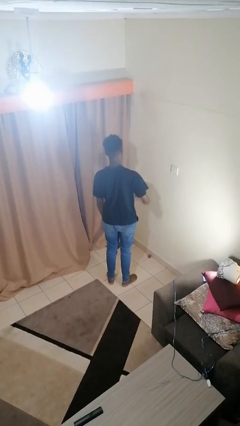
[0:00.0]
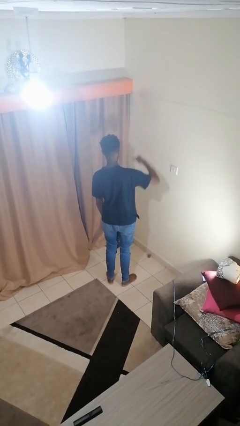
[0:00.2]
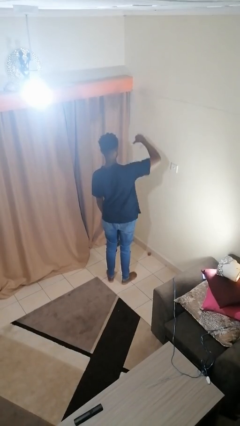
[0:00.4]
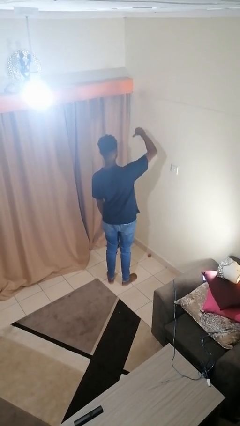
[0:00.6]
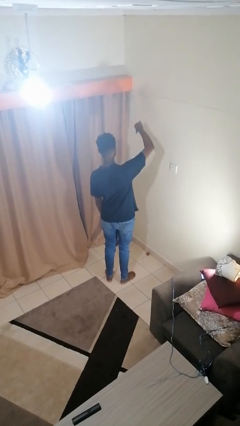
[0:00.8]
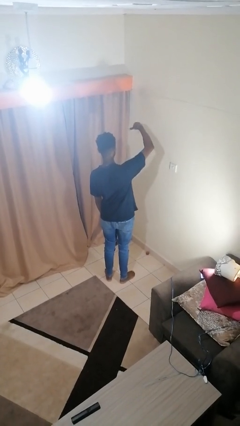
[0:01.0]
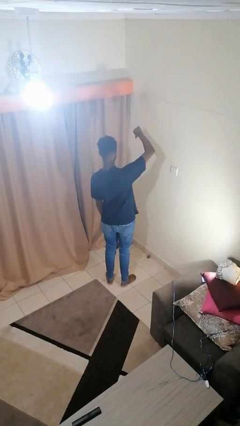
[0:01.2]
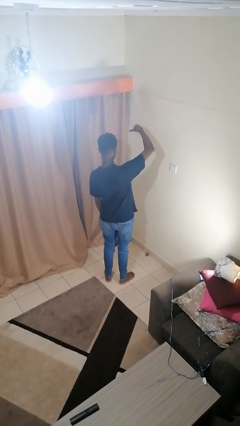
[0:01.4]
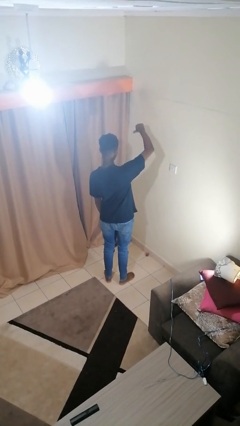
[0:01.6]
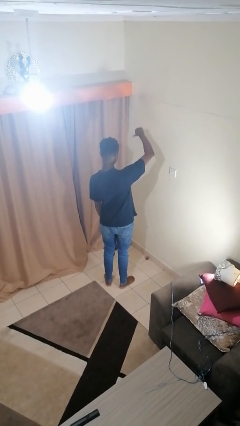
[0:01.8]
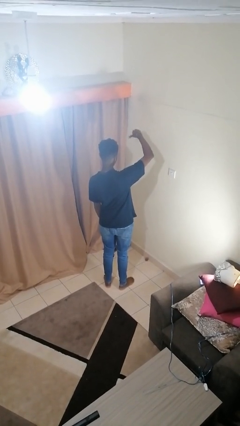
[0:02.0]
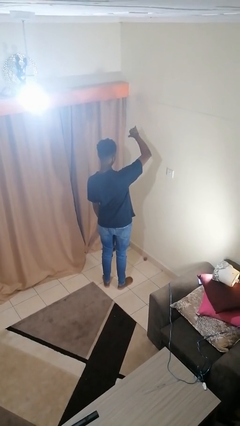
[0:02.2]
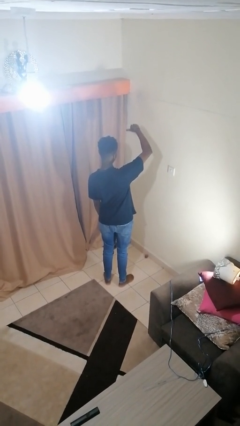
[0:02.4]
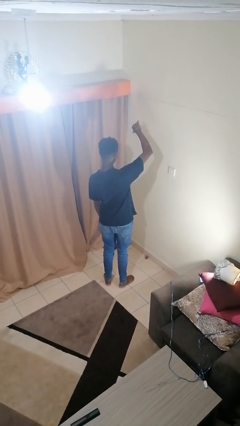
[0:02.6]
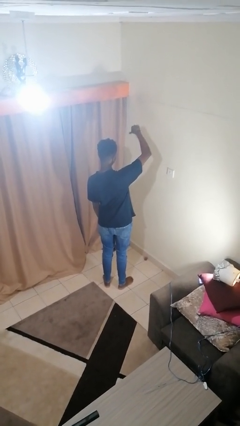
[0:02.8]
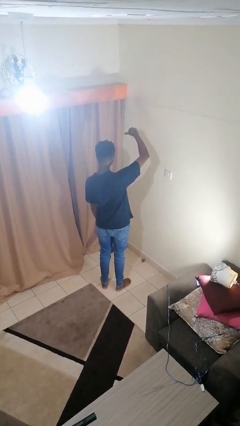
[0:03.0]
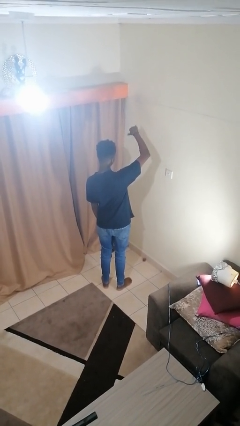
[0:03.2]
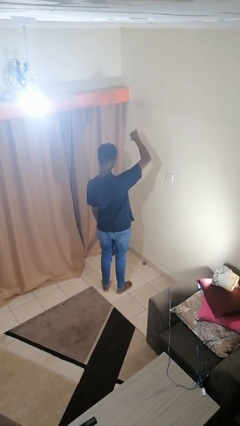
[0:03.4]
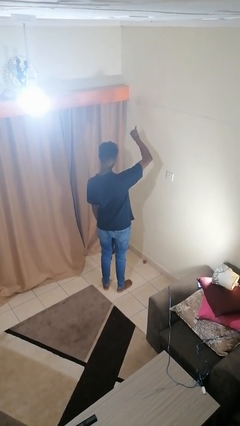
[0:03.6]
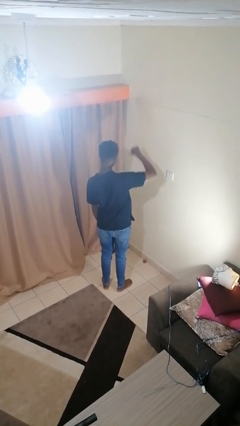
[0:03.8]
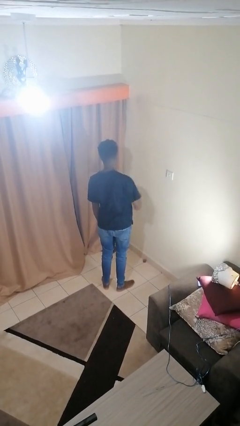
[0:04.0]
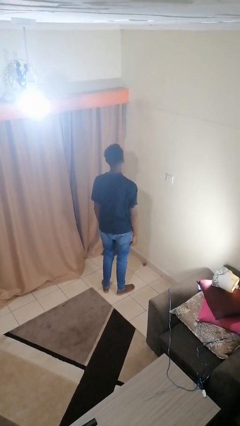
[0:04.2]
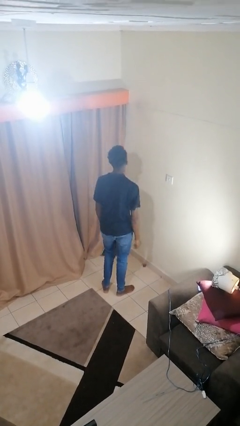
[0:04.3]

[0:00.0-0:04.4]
person gestures hang loose

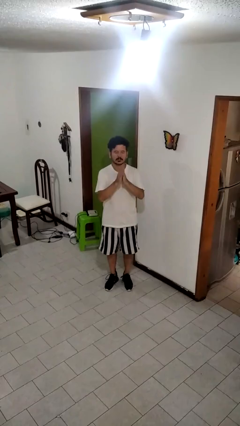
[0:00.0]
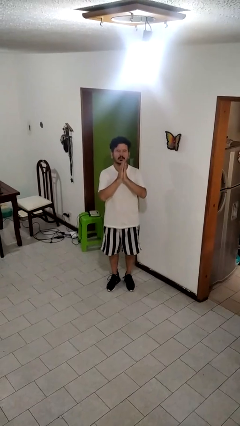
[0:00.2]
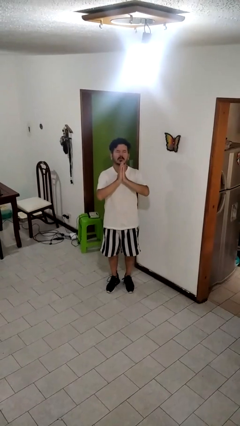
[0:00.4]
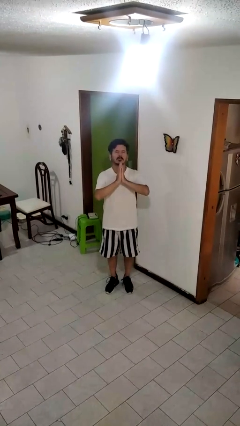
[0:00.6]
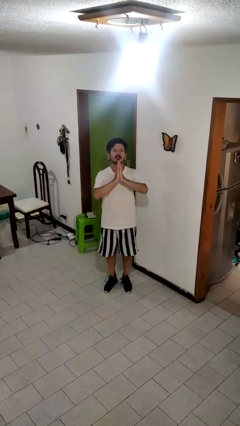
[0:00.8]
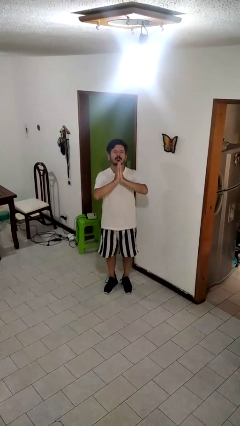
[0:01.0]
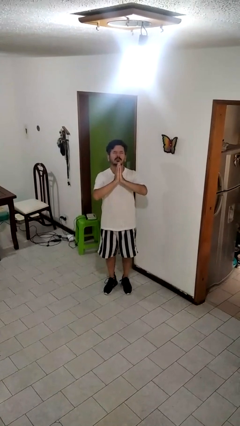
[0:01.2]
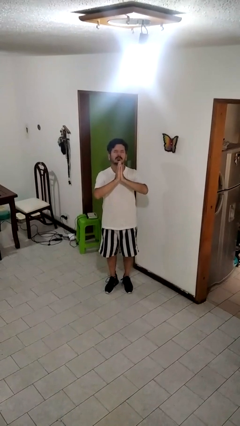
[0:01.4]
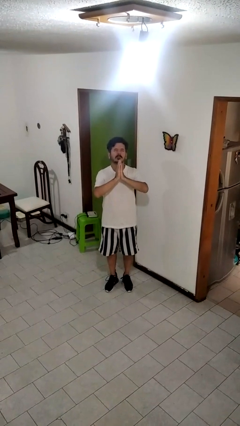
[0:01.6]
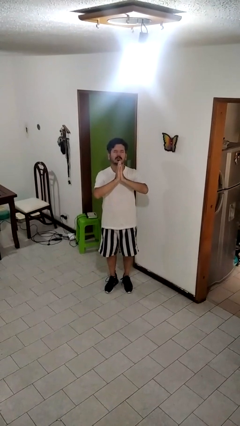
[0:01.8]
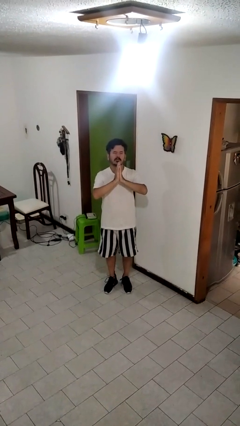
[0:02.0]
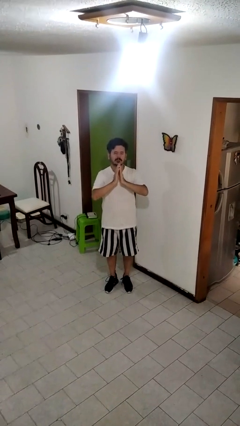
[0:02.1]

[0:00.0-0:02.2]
person prays

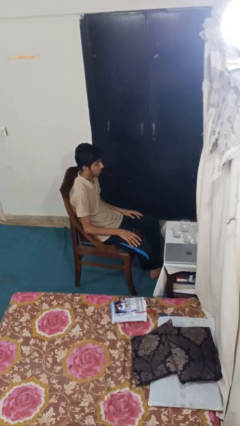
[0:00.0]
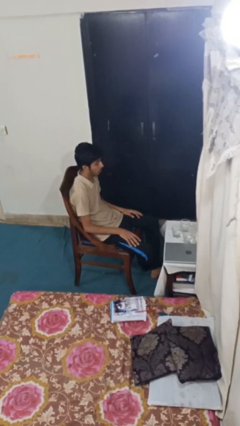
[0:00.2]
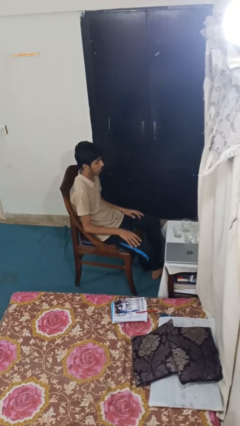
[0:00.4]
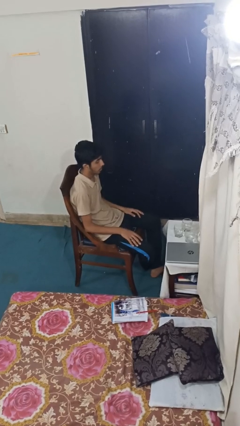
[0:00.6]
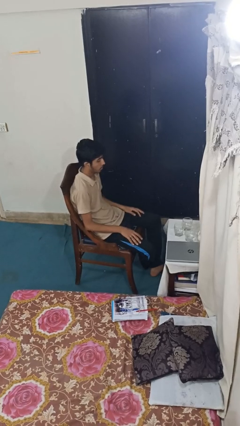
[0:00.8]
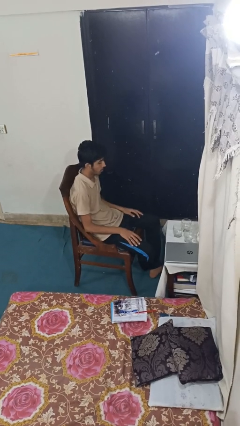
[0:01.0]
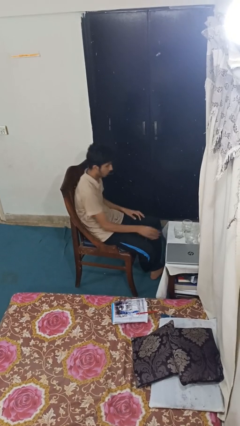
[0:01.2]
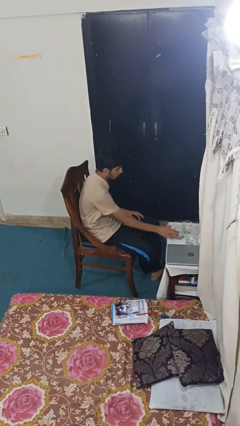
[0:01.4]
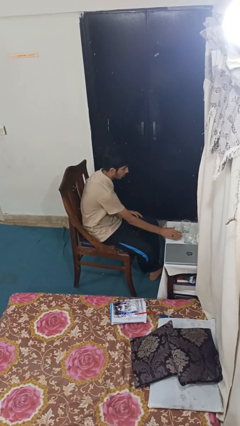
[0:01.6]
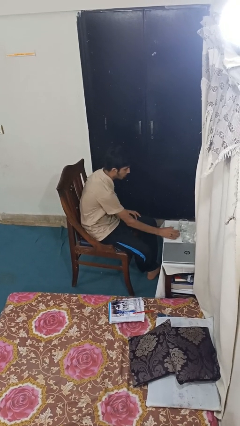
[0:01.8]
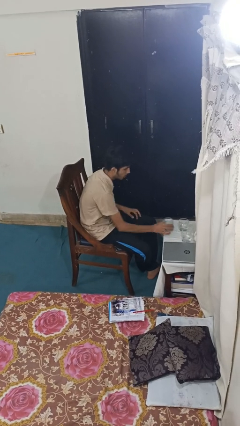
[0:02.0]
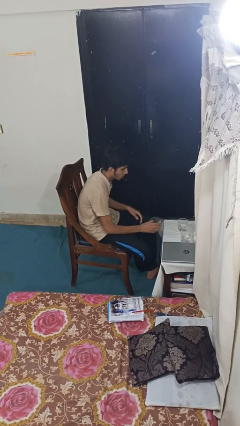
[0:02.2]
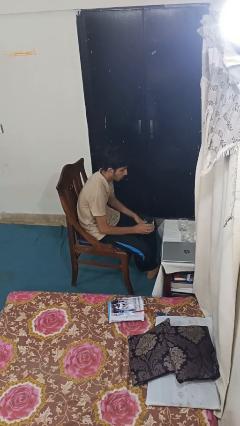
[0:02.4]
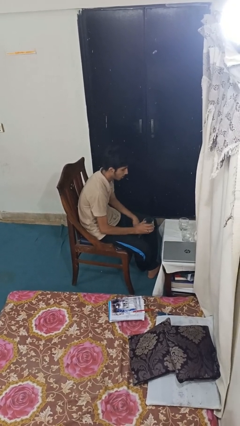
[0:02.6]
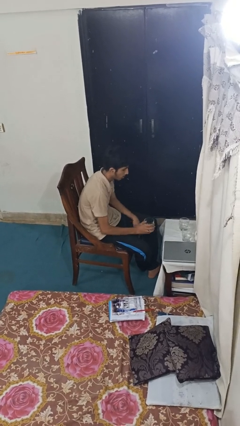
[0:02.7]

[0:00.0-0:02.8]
person picks up object from table

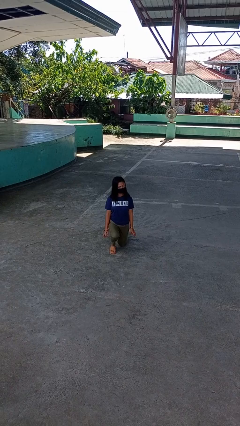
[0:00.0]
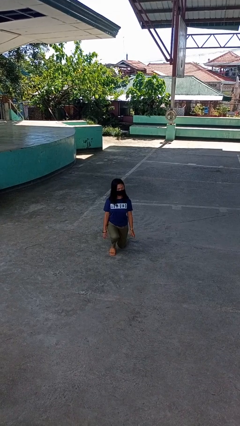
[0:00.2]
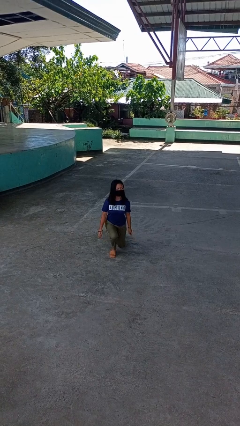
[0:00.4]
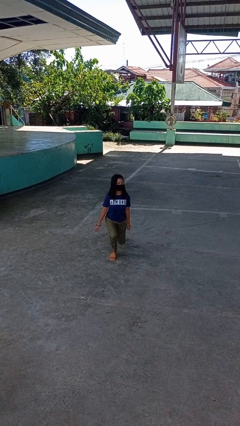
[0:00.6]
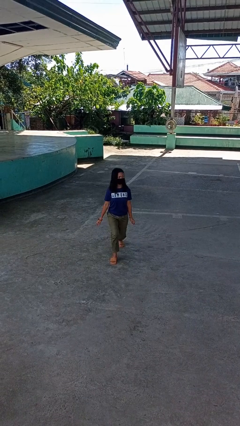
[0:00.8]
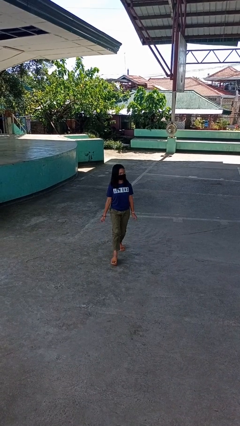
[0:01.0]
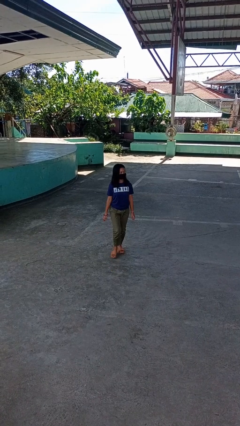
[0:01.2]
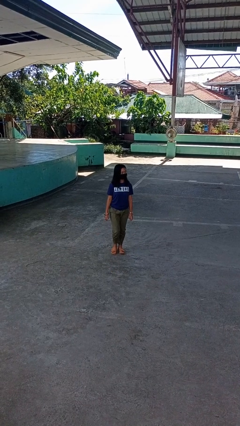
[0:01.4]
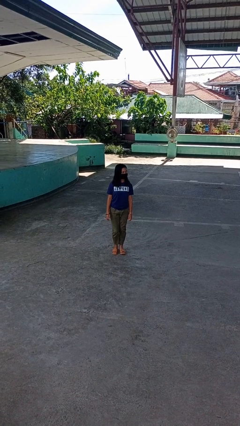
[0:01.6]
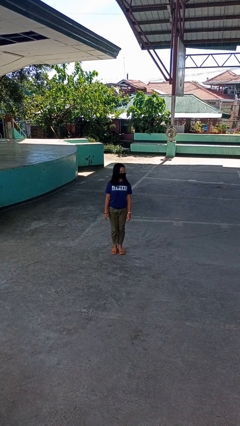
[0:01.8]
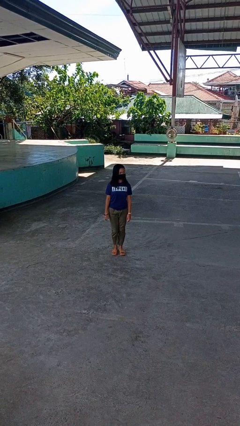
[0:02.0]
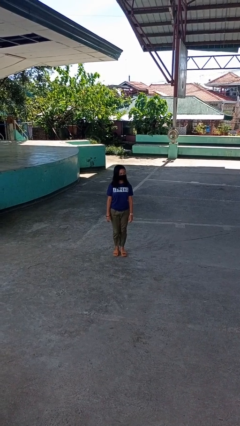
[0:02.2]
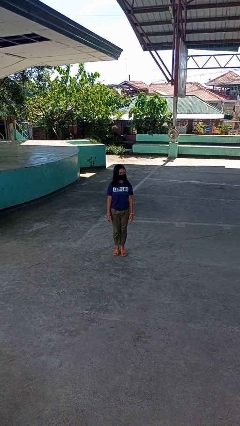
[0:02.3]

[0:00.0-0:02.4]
person stands up from floor

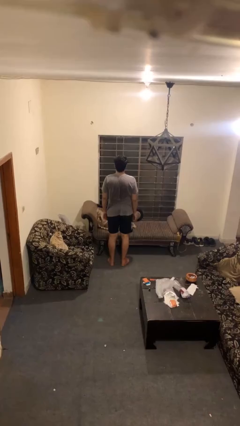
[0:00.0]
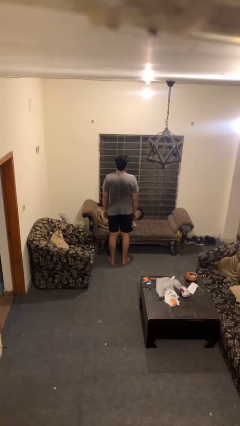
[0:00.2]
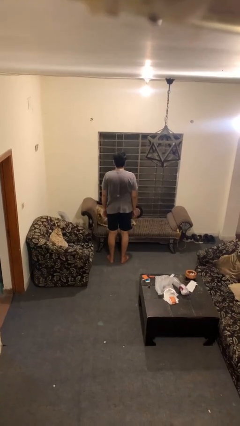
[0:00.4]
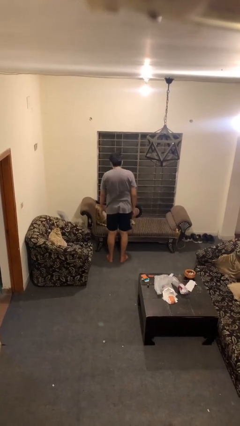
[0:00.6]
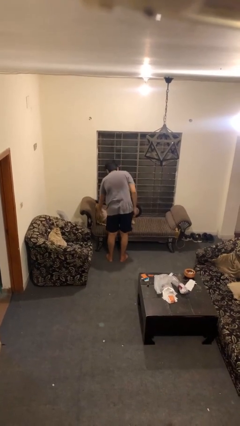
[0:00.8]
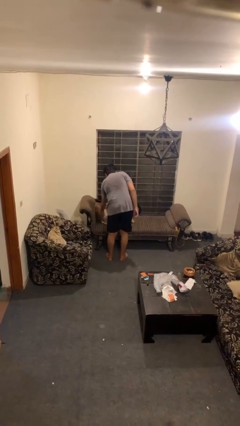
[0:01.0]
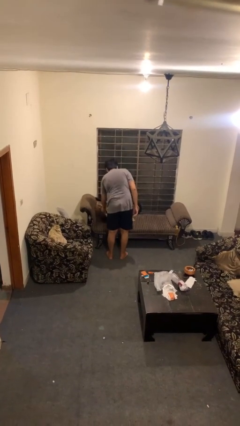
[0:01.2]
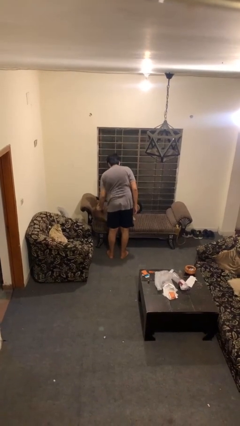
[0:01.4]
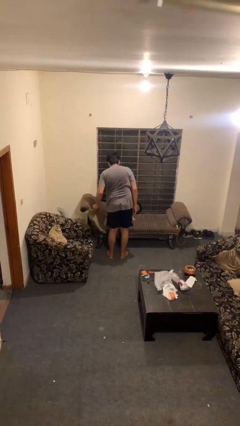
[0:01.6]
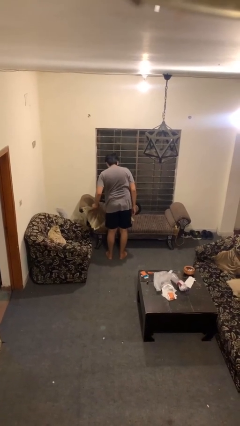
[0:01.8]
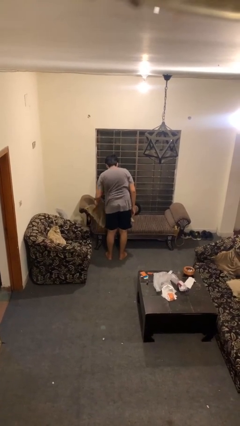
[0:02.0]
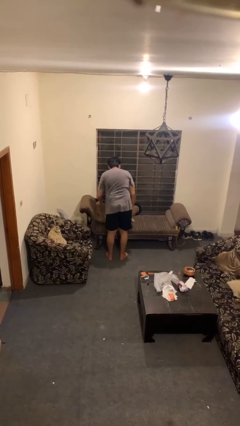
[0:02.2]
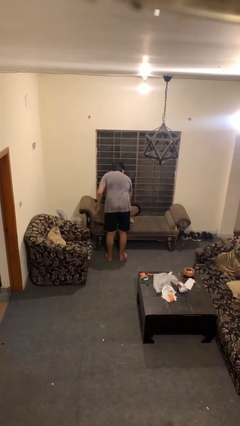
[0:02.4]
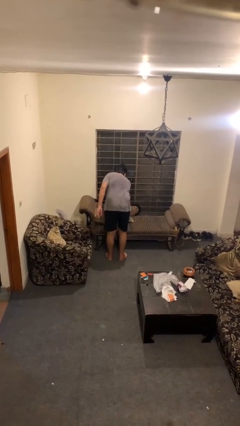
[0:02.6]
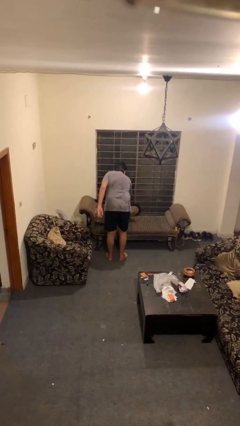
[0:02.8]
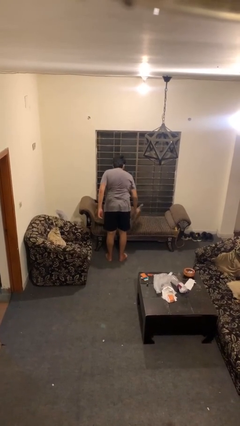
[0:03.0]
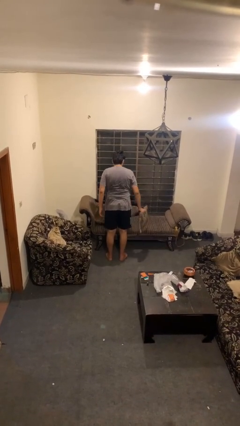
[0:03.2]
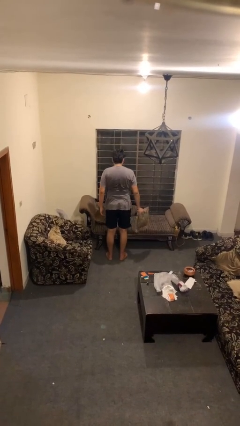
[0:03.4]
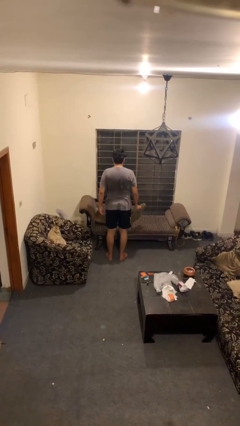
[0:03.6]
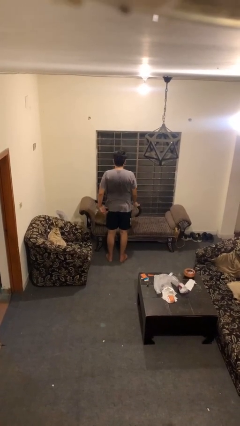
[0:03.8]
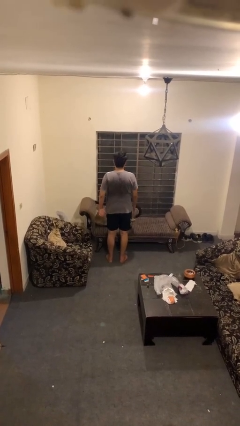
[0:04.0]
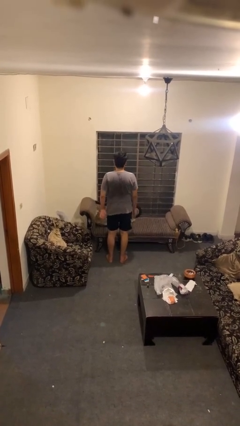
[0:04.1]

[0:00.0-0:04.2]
person searches in couch

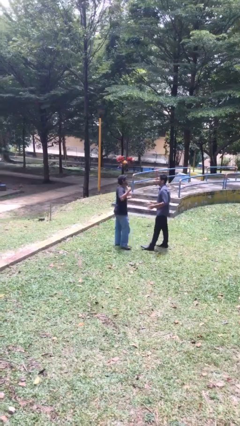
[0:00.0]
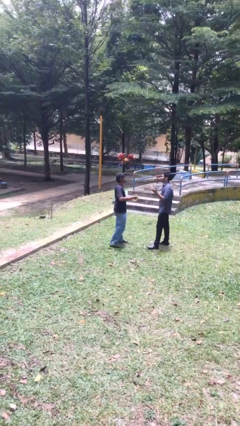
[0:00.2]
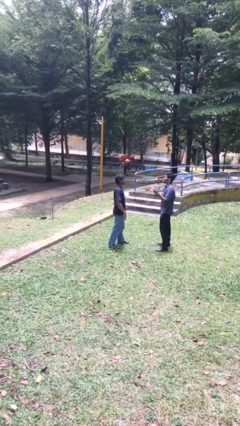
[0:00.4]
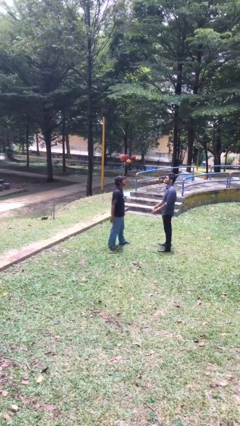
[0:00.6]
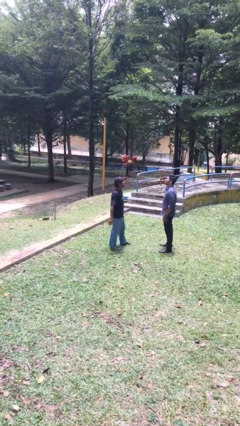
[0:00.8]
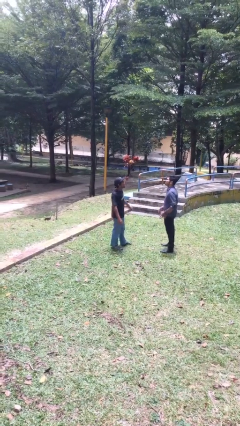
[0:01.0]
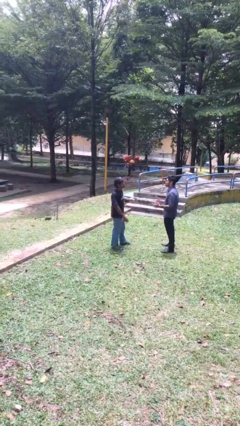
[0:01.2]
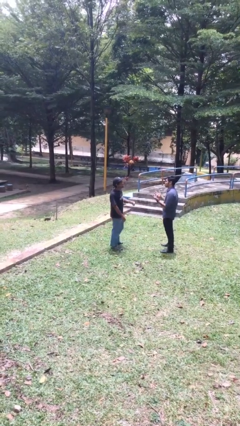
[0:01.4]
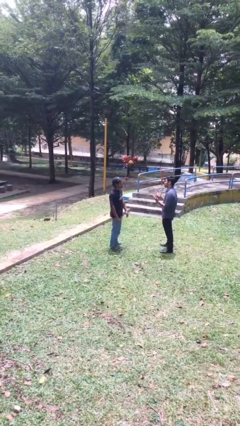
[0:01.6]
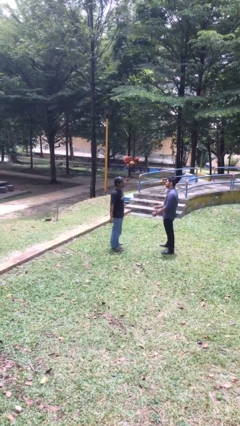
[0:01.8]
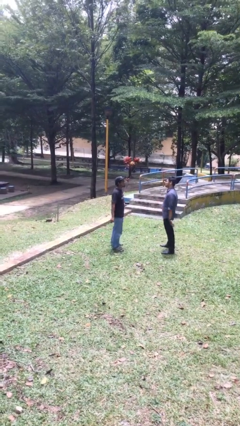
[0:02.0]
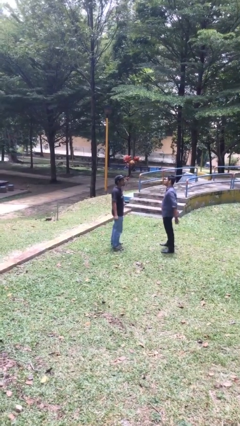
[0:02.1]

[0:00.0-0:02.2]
person talks to person
